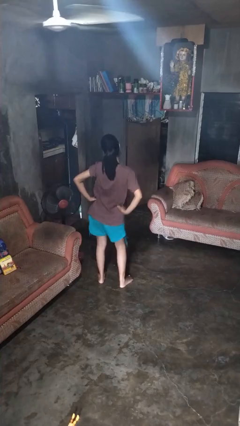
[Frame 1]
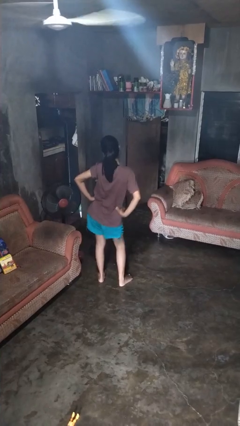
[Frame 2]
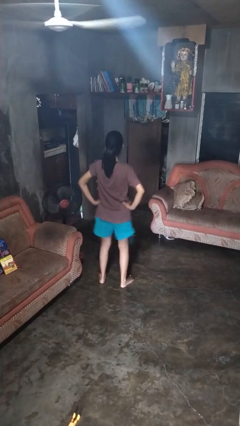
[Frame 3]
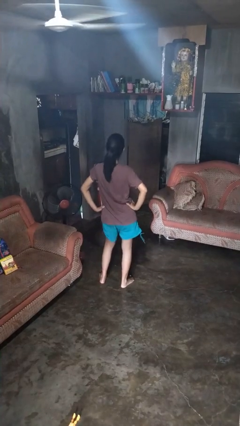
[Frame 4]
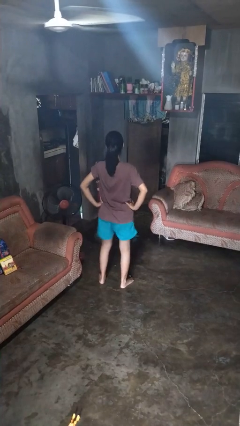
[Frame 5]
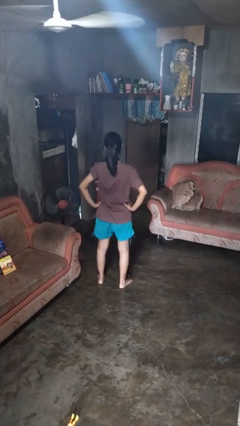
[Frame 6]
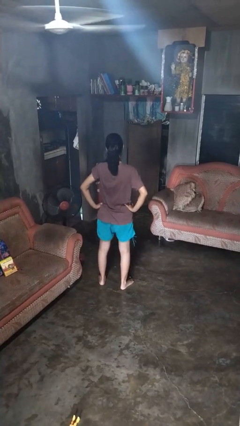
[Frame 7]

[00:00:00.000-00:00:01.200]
person dances in place

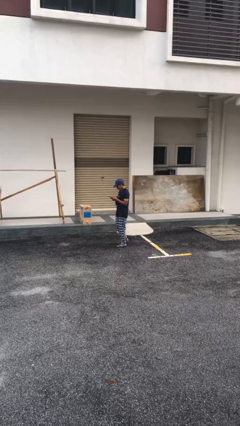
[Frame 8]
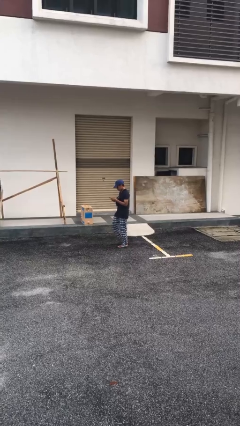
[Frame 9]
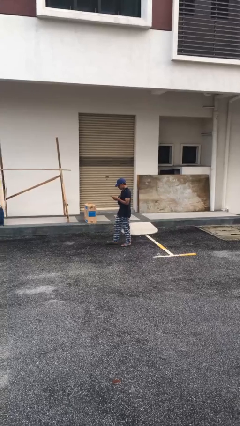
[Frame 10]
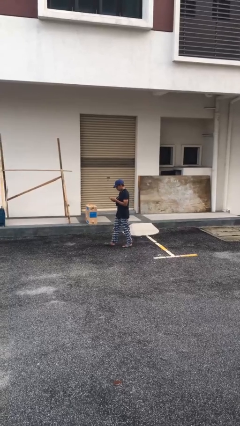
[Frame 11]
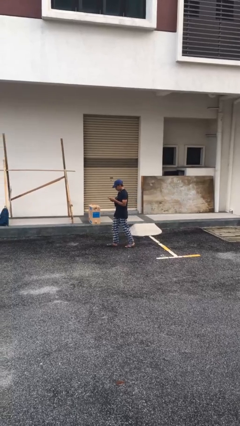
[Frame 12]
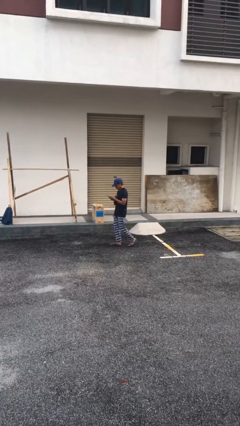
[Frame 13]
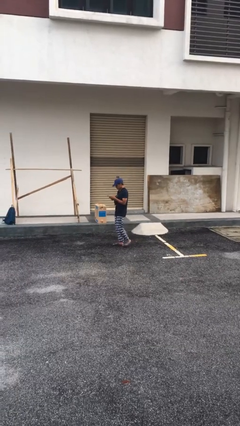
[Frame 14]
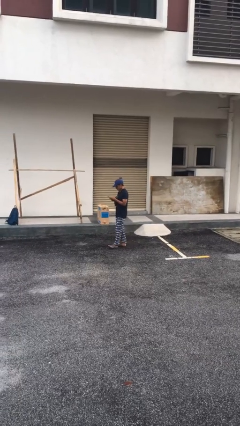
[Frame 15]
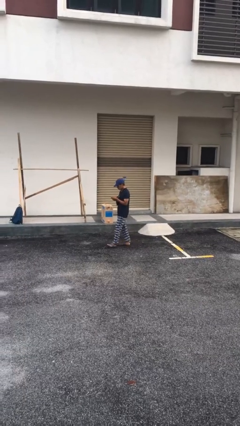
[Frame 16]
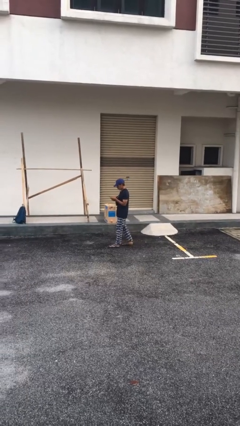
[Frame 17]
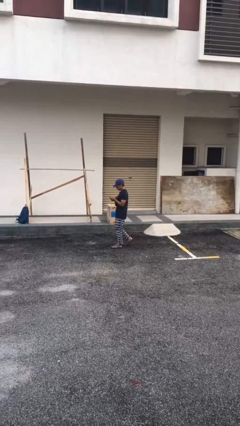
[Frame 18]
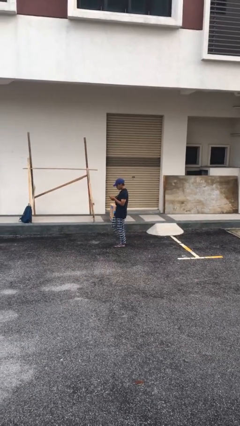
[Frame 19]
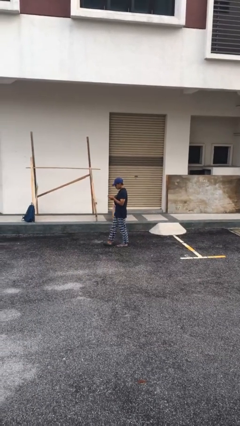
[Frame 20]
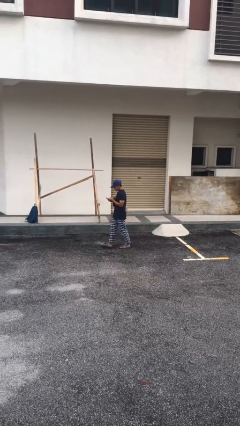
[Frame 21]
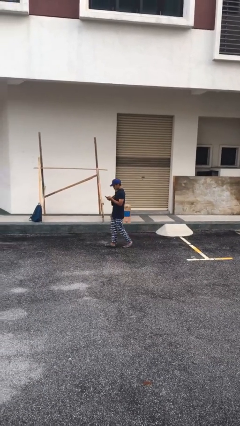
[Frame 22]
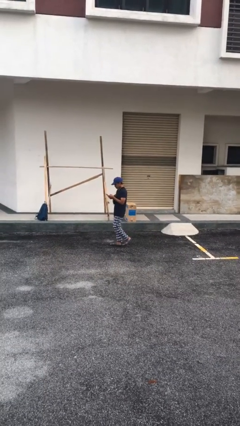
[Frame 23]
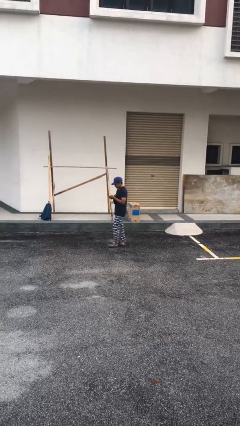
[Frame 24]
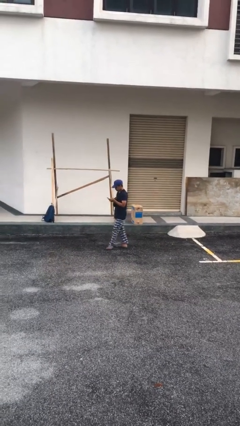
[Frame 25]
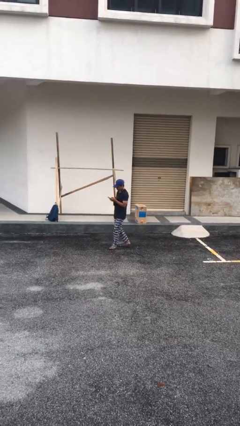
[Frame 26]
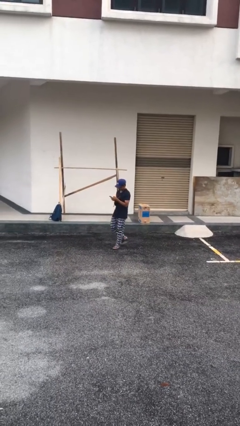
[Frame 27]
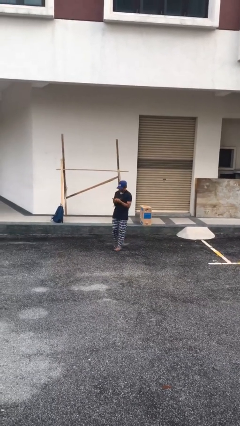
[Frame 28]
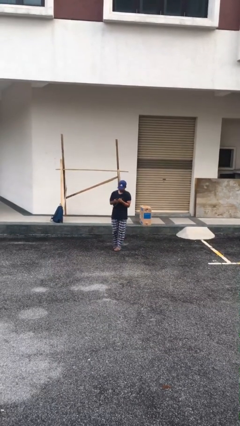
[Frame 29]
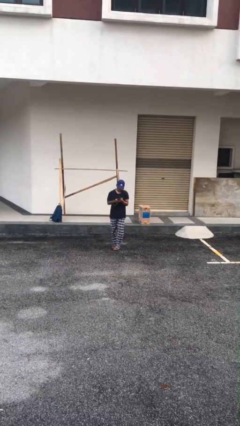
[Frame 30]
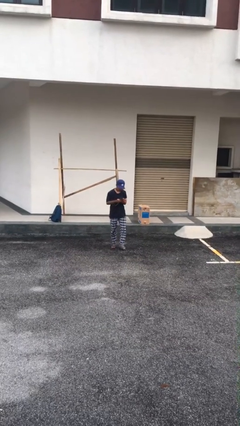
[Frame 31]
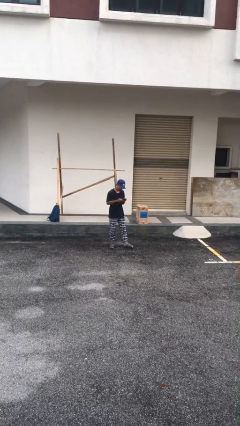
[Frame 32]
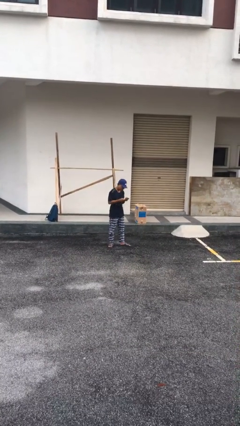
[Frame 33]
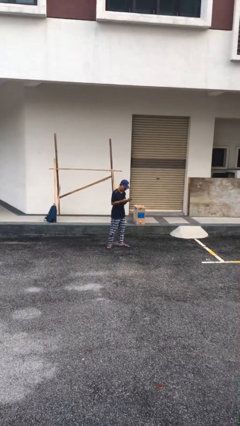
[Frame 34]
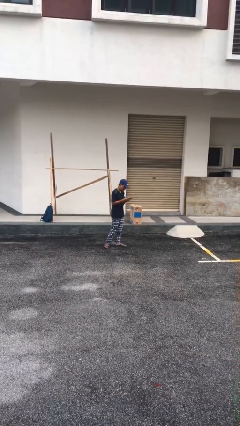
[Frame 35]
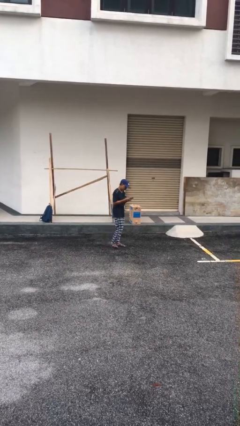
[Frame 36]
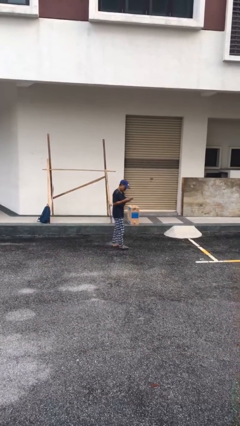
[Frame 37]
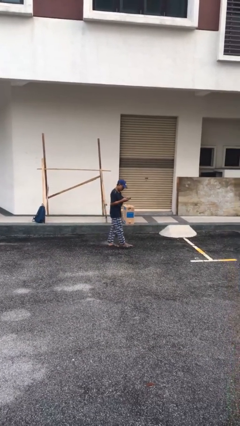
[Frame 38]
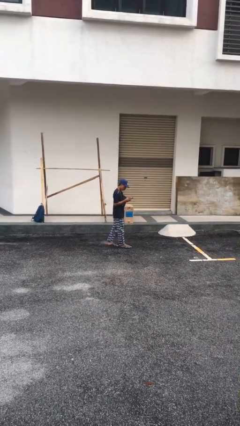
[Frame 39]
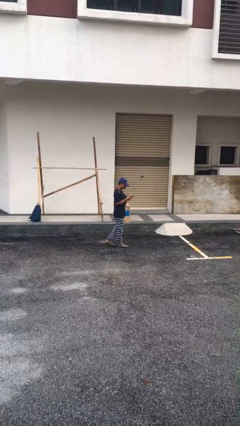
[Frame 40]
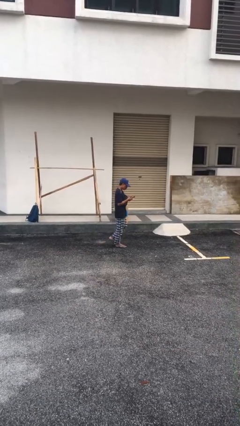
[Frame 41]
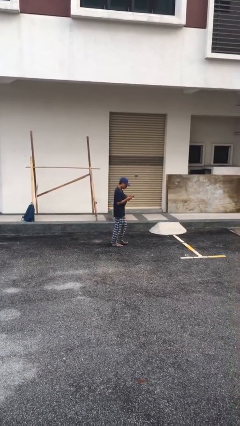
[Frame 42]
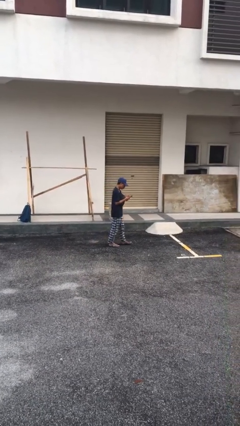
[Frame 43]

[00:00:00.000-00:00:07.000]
person texts on phone

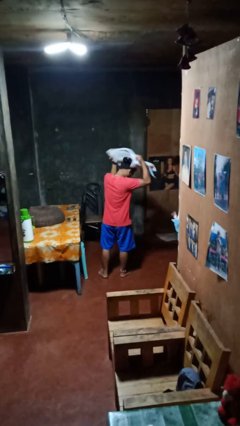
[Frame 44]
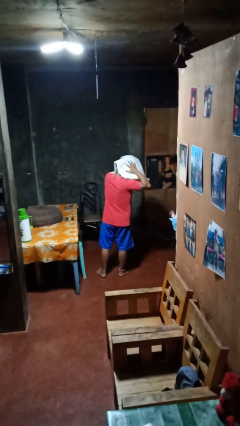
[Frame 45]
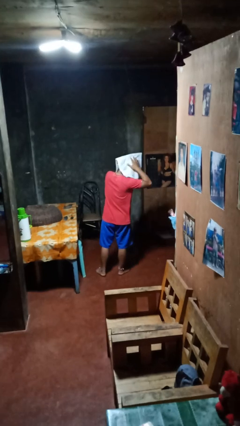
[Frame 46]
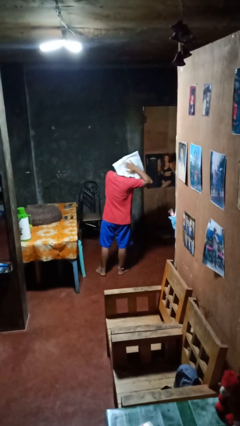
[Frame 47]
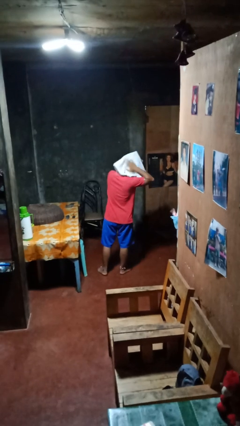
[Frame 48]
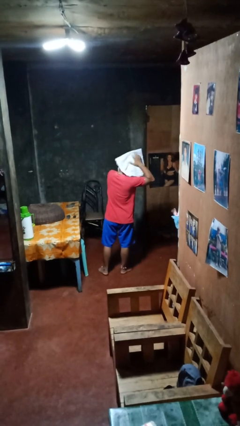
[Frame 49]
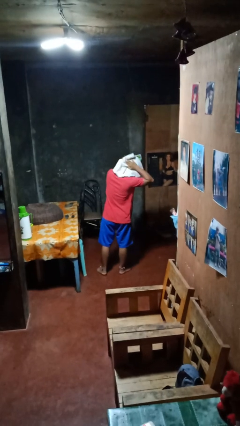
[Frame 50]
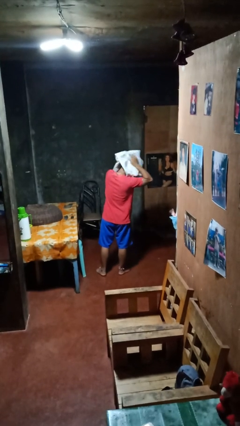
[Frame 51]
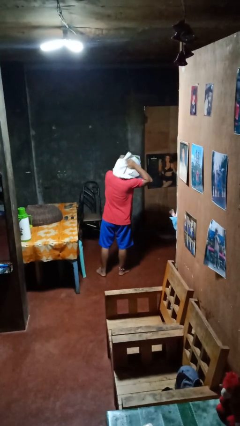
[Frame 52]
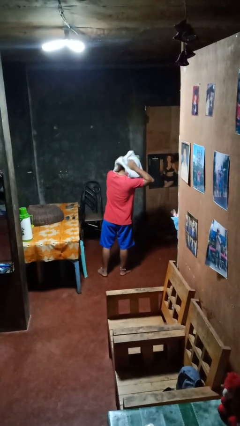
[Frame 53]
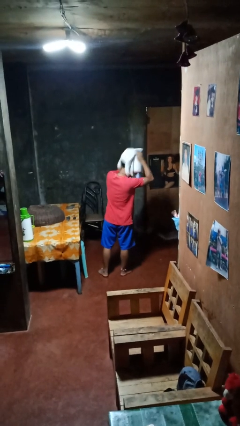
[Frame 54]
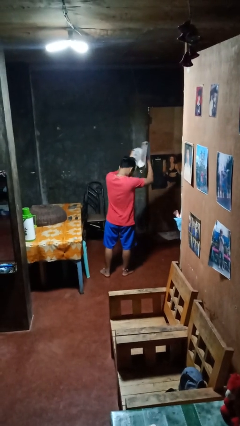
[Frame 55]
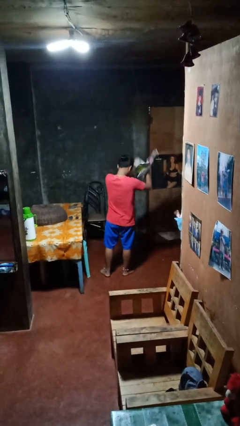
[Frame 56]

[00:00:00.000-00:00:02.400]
person dries hair with towel

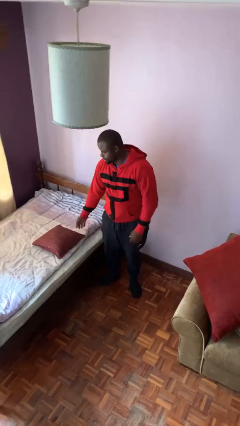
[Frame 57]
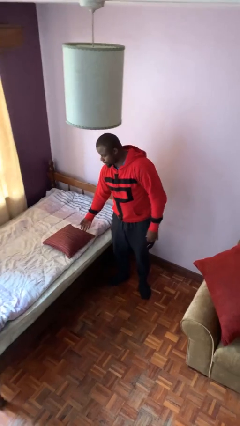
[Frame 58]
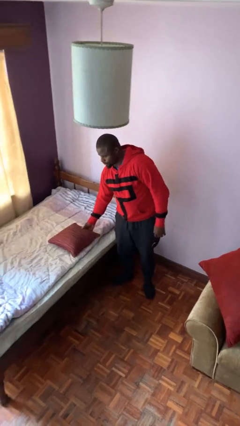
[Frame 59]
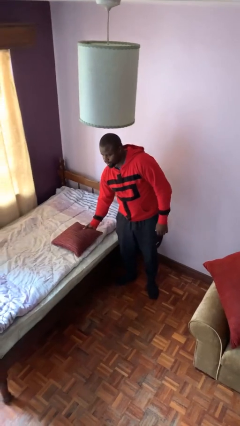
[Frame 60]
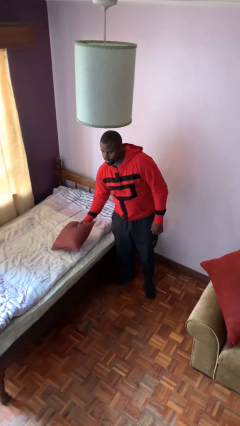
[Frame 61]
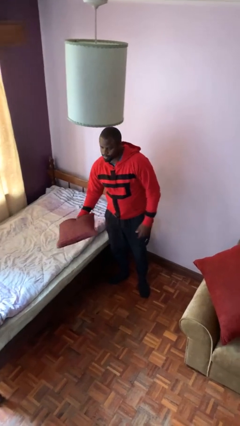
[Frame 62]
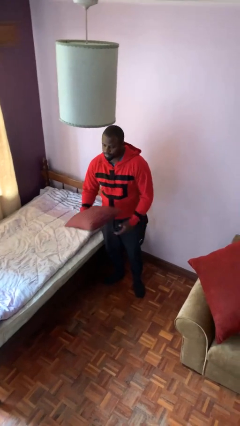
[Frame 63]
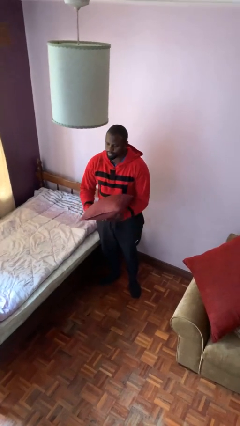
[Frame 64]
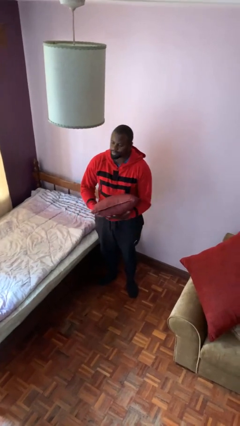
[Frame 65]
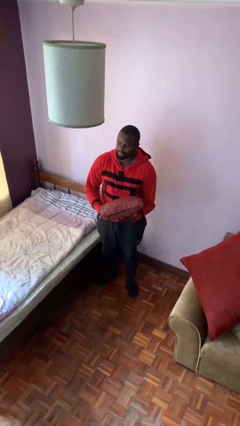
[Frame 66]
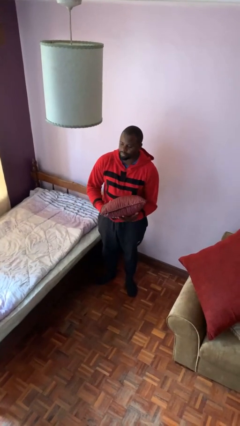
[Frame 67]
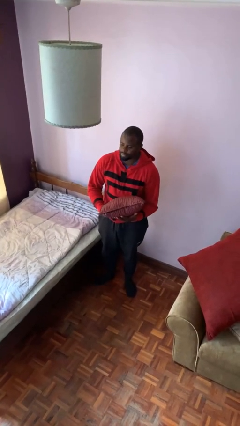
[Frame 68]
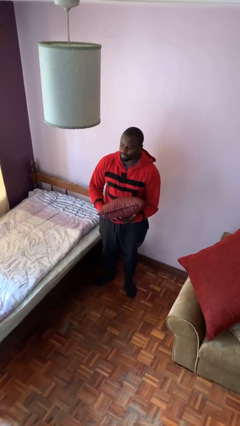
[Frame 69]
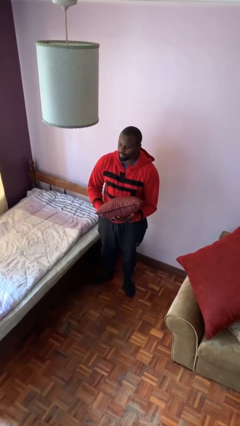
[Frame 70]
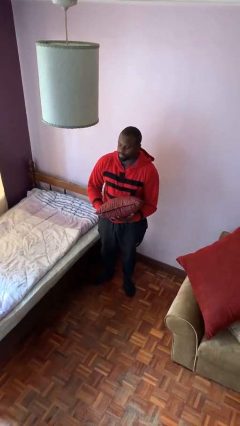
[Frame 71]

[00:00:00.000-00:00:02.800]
person picks up object from bed

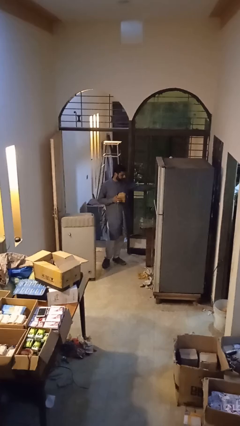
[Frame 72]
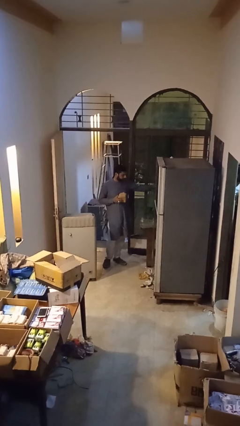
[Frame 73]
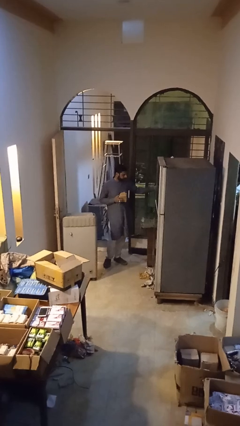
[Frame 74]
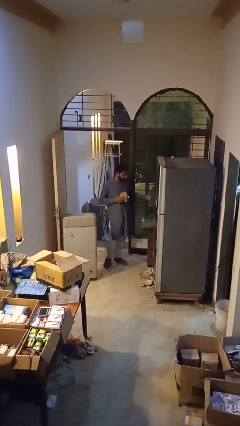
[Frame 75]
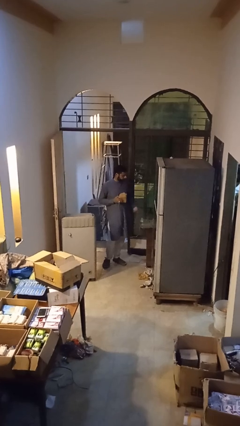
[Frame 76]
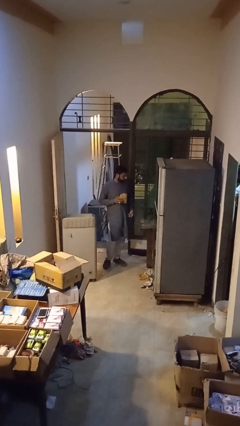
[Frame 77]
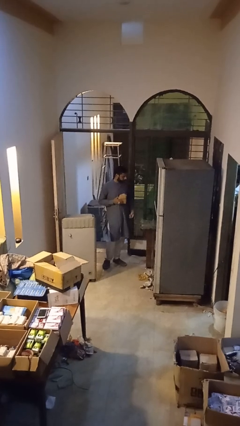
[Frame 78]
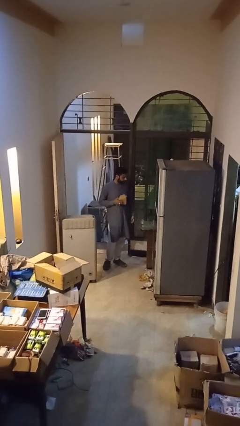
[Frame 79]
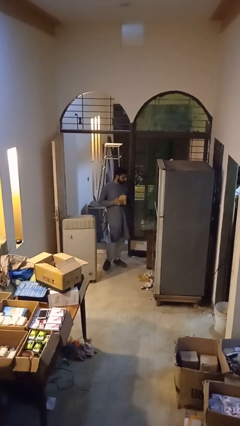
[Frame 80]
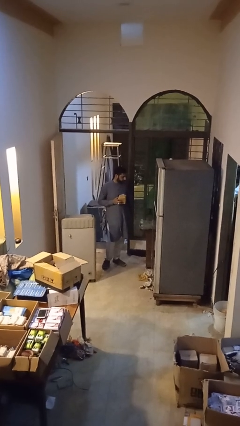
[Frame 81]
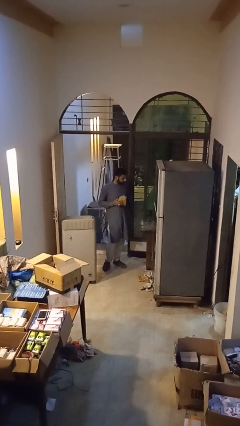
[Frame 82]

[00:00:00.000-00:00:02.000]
person unplugs from electrical socket

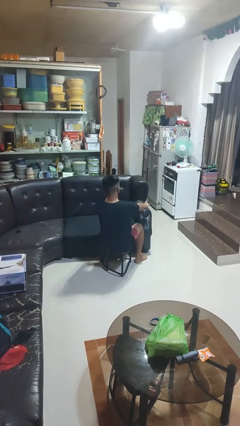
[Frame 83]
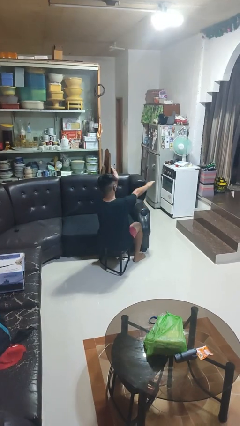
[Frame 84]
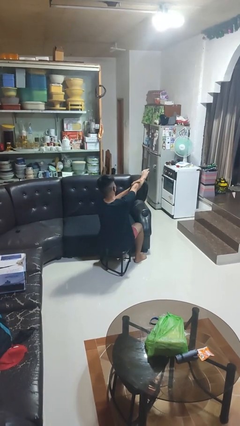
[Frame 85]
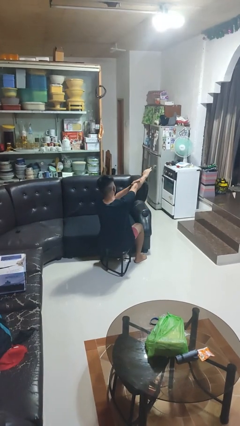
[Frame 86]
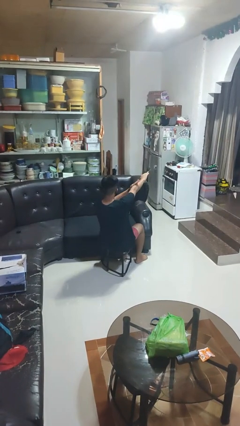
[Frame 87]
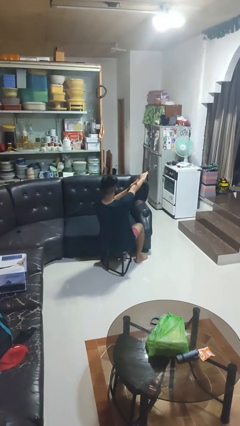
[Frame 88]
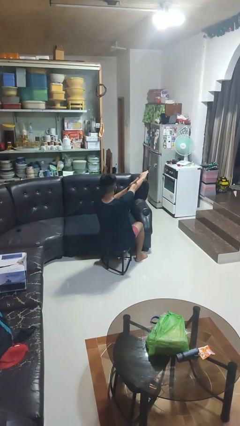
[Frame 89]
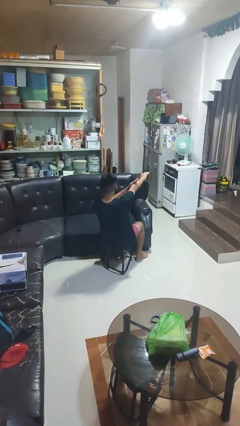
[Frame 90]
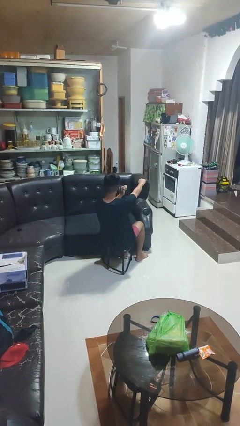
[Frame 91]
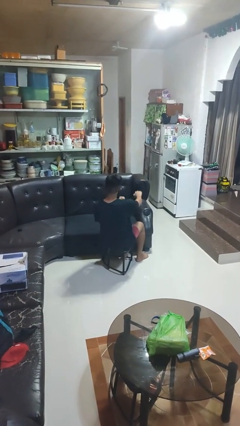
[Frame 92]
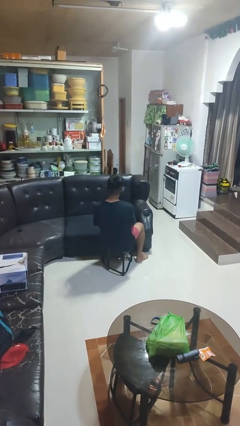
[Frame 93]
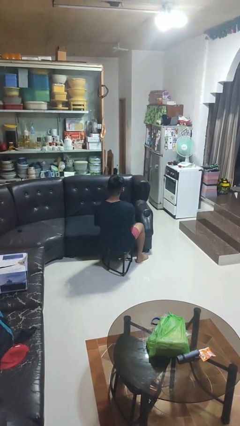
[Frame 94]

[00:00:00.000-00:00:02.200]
person swats bug
